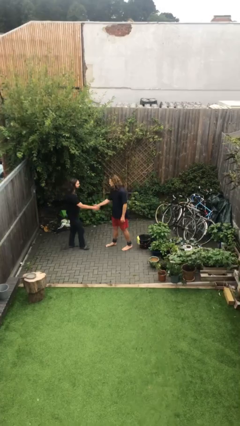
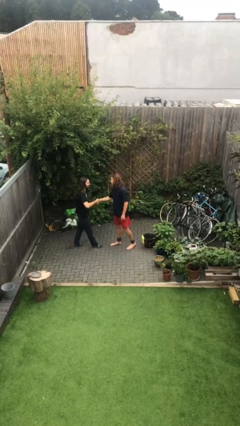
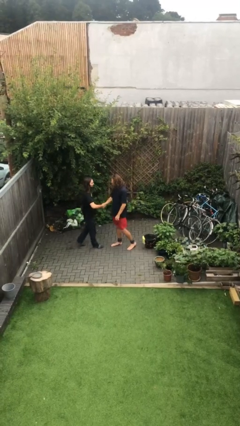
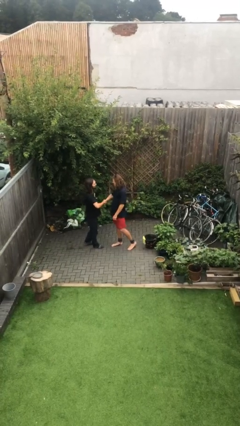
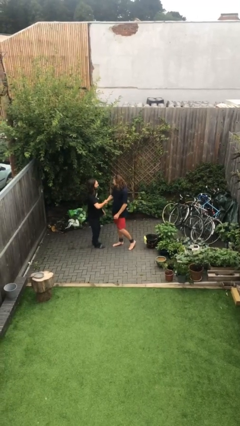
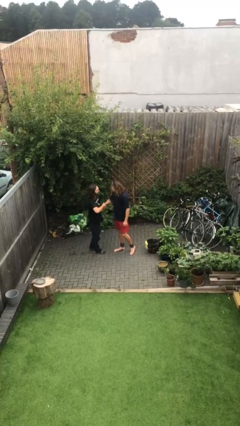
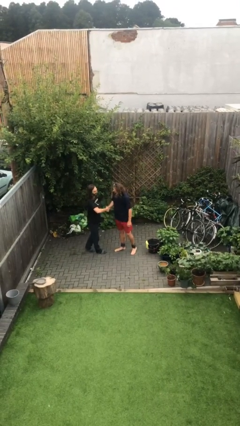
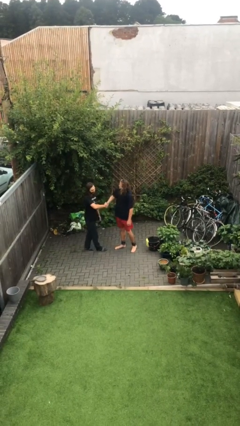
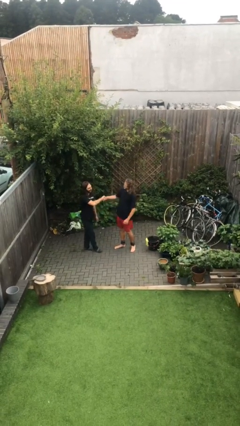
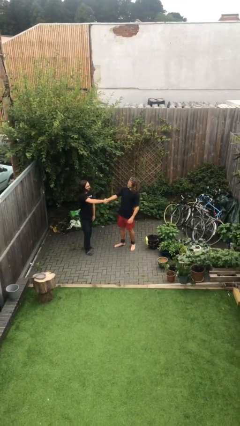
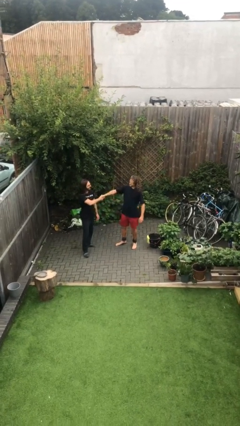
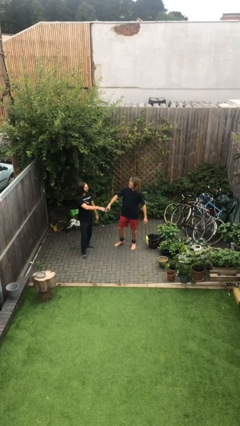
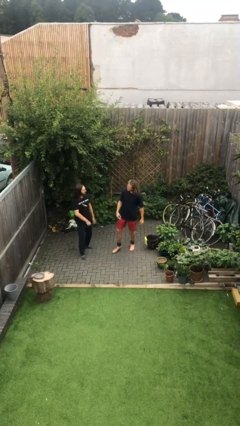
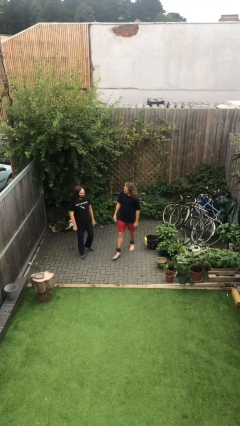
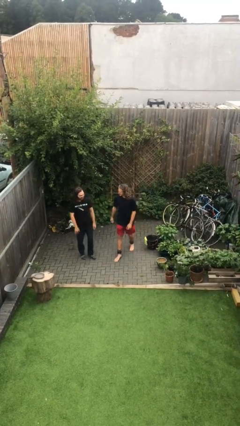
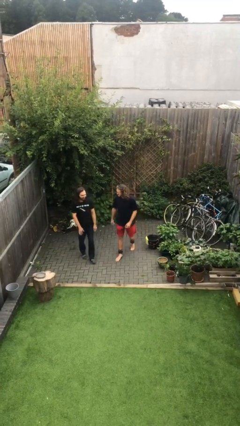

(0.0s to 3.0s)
person shakes hand

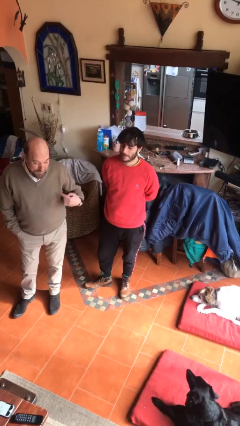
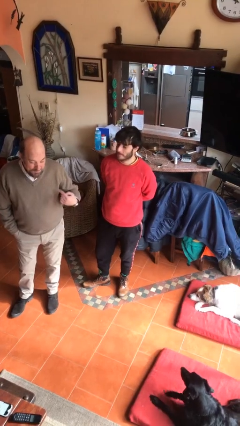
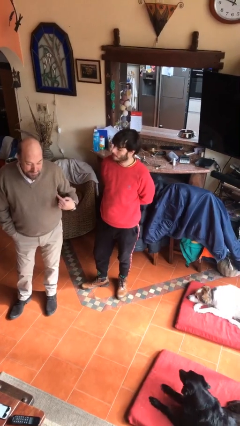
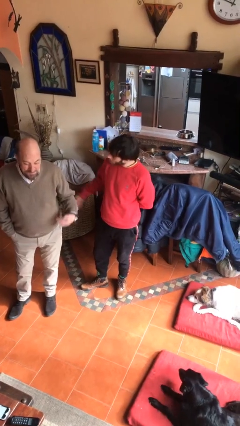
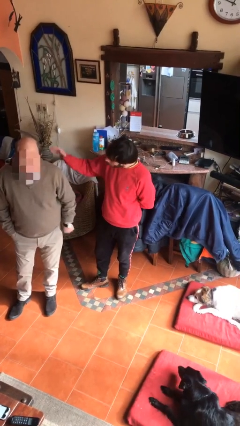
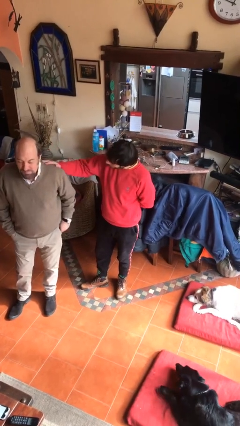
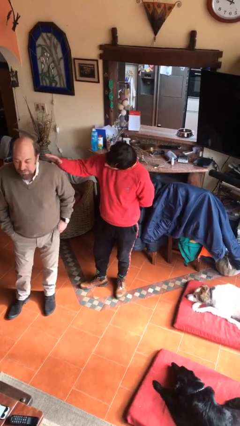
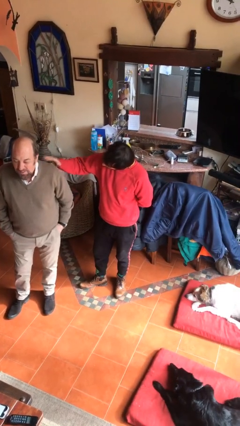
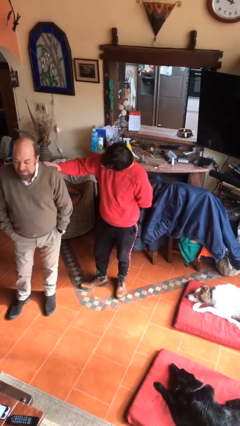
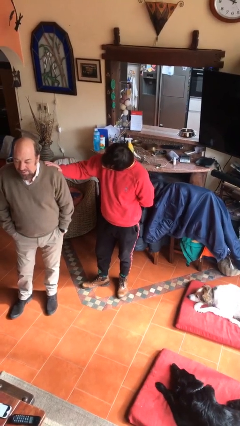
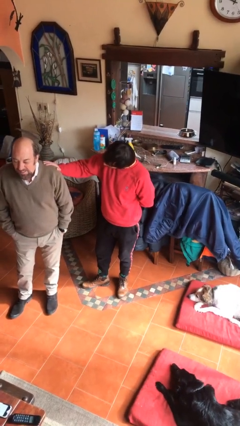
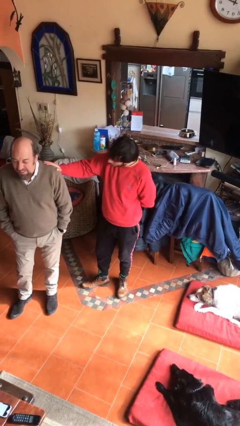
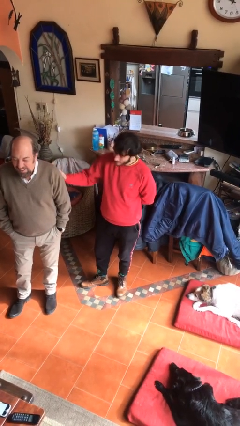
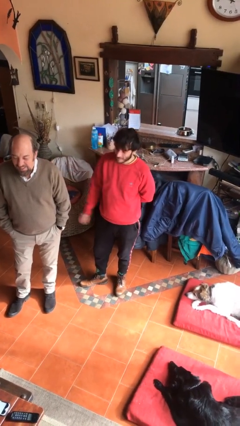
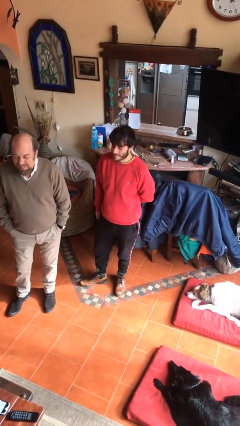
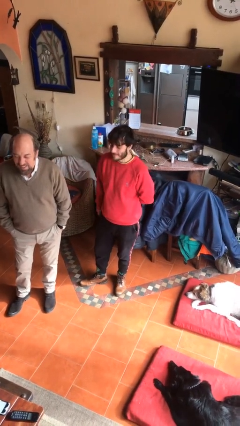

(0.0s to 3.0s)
person pounds shoulders of person

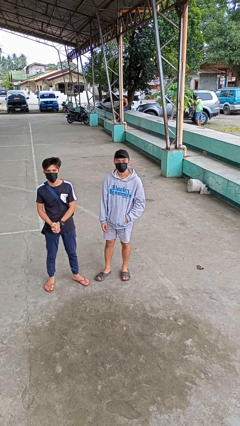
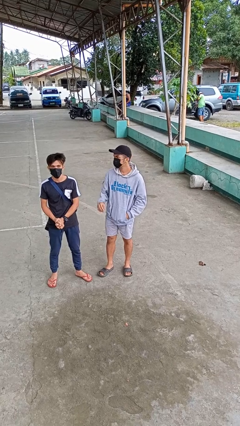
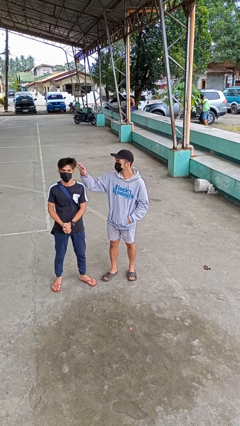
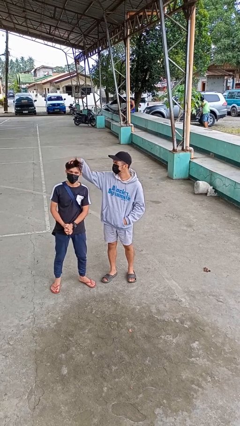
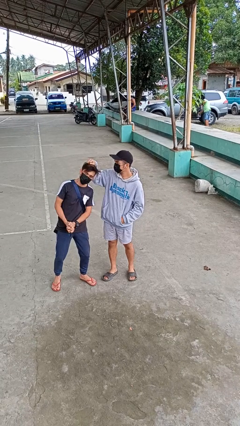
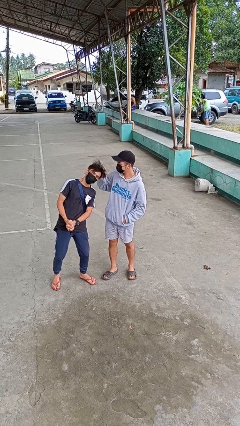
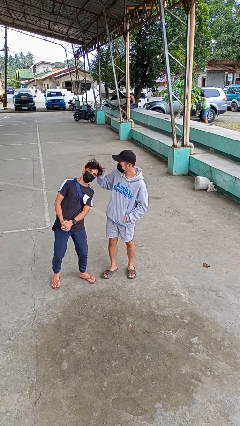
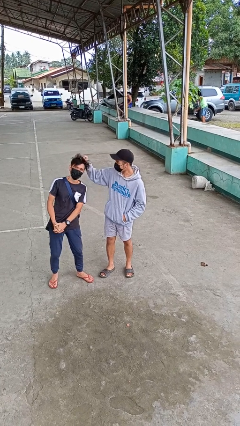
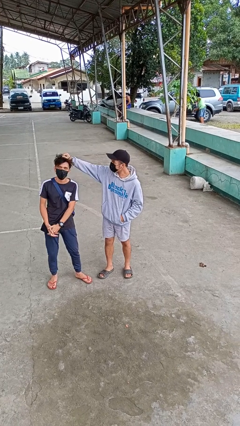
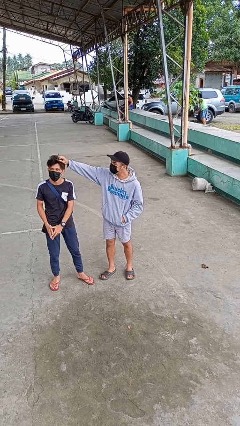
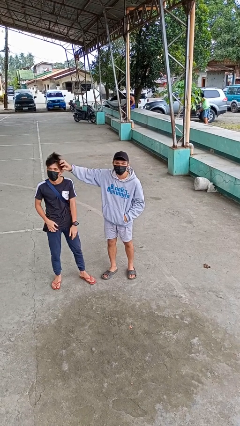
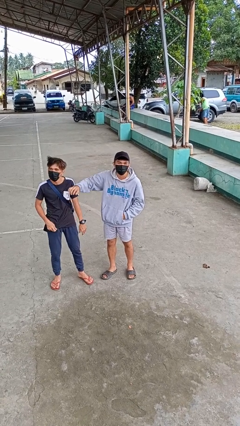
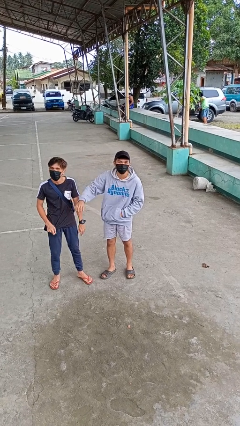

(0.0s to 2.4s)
person grabs person by hair

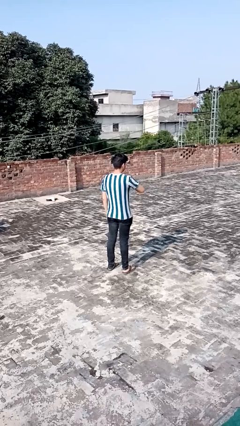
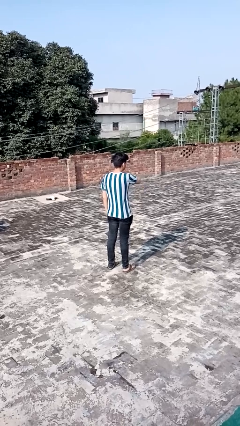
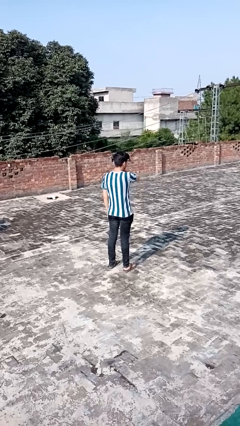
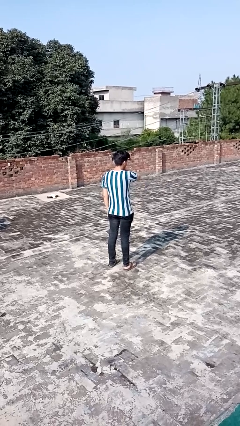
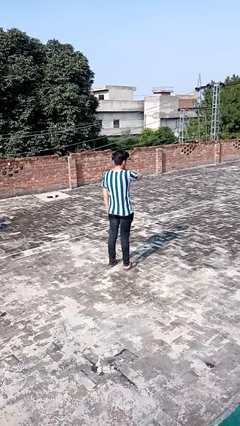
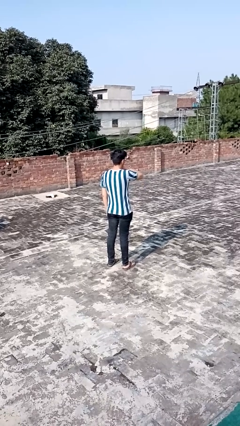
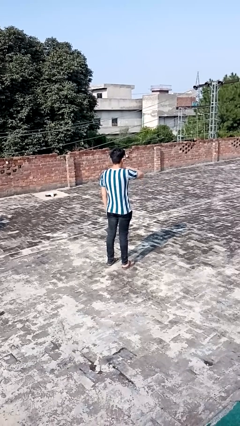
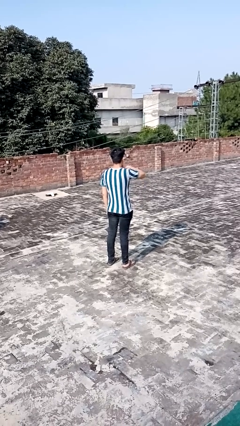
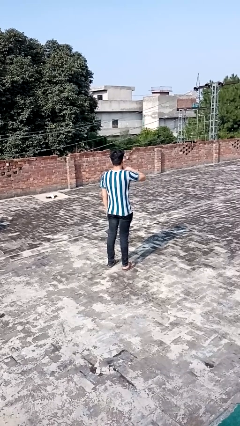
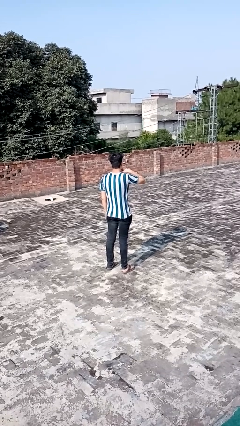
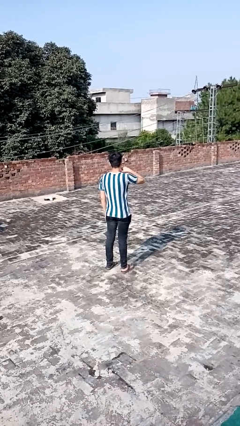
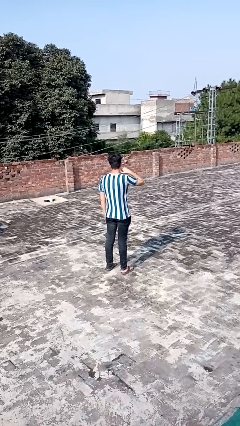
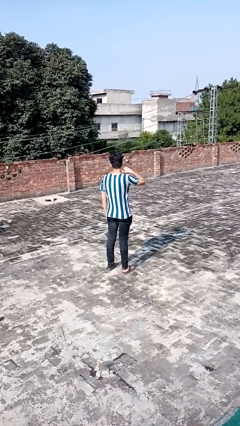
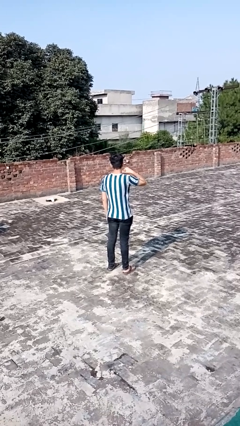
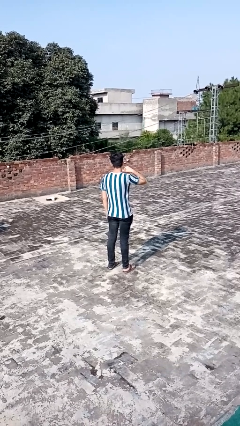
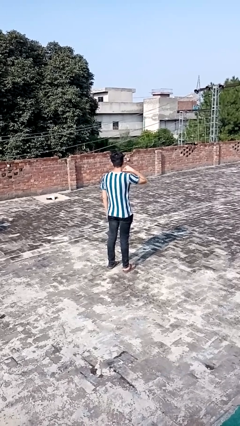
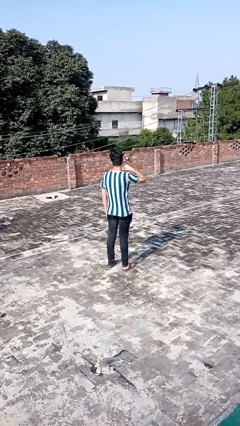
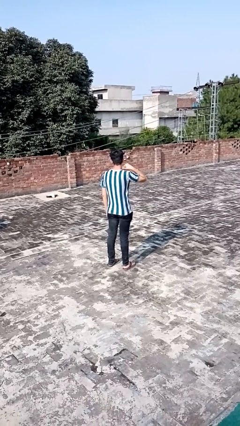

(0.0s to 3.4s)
person gestures cut

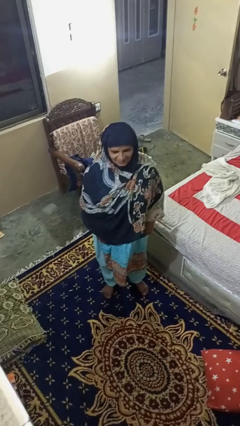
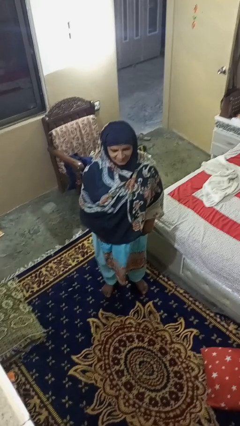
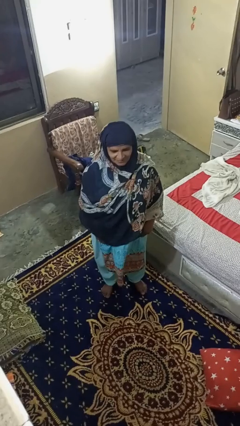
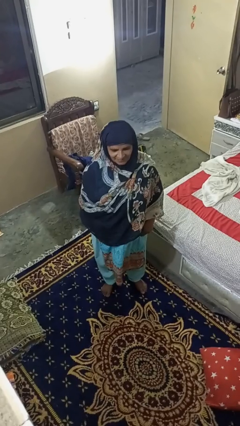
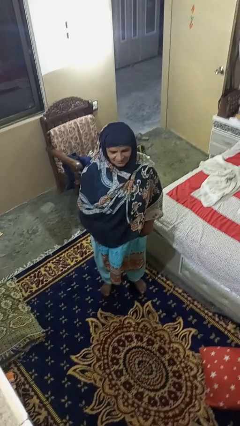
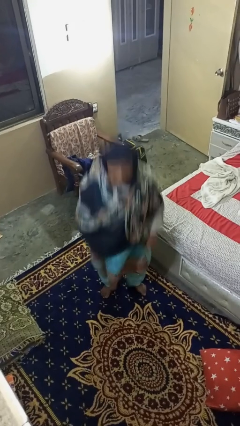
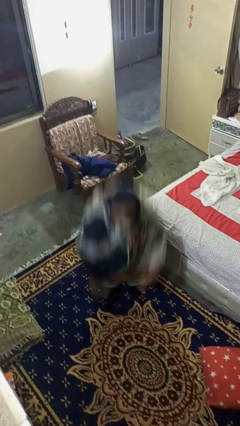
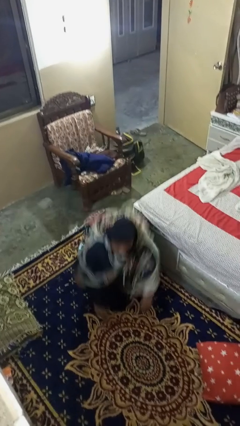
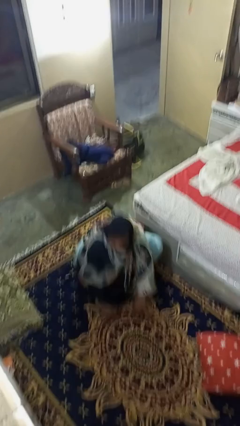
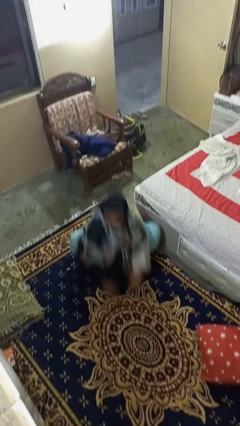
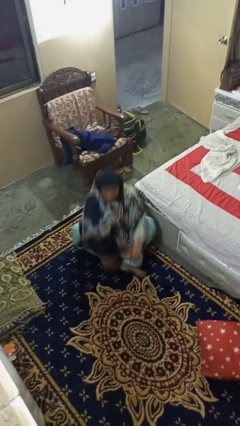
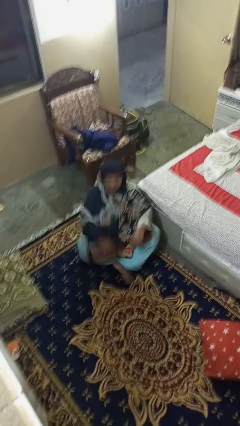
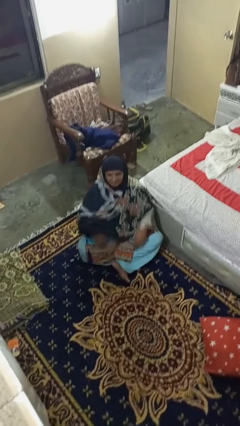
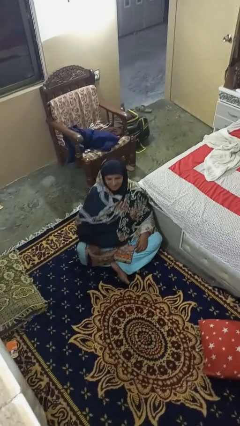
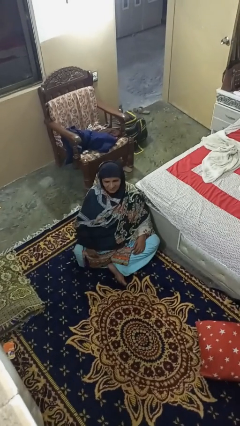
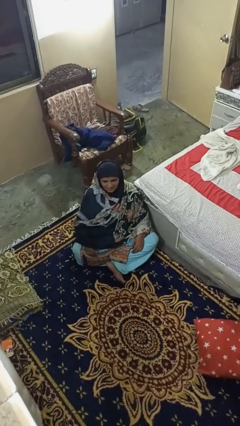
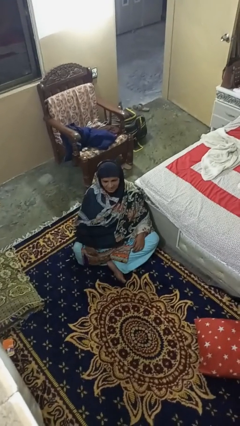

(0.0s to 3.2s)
person sits crisscross

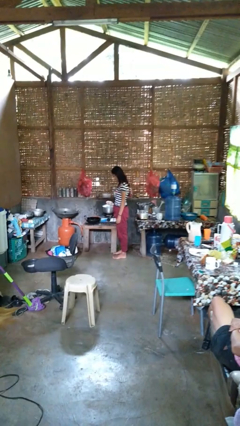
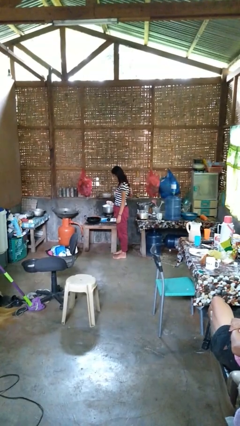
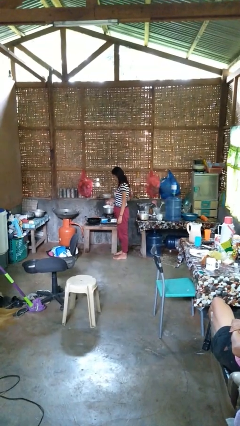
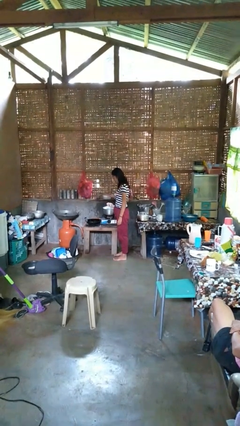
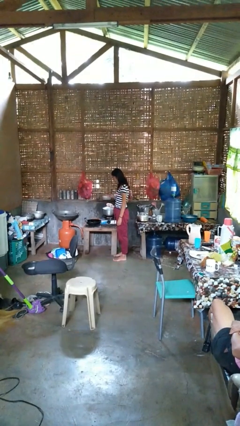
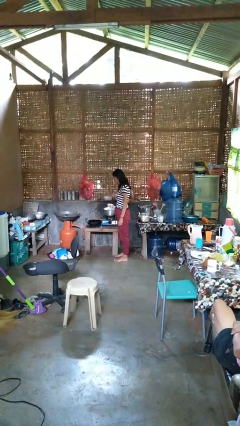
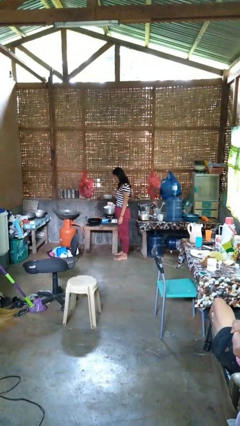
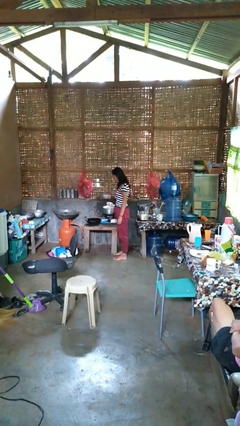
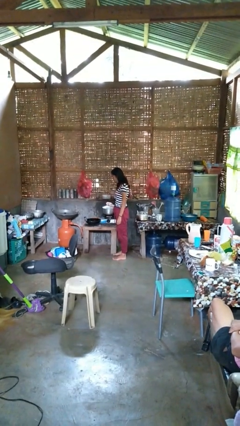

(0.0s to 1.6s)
person burns hand

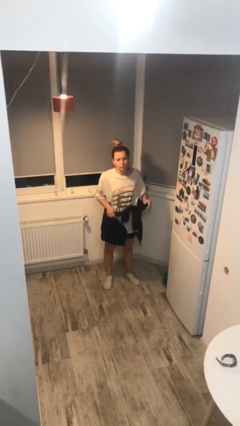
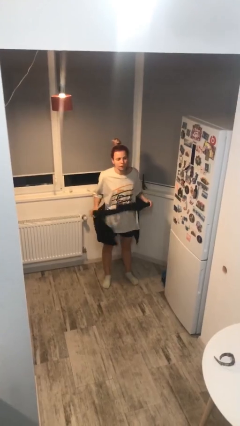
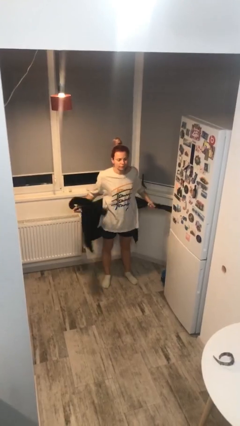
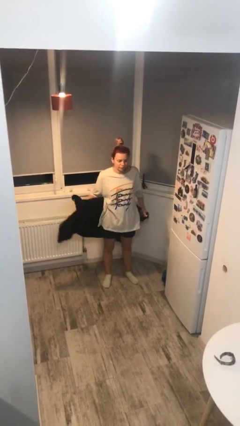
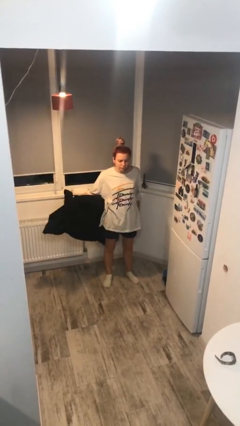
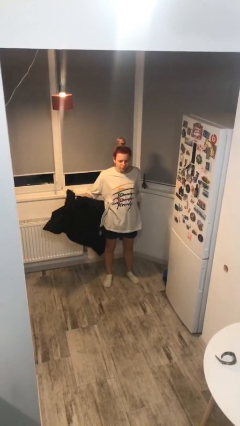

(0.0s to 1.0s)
person unties jacket around waist
